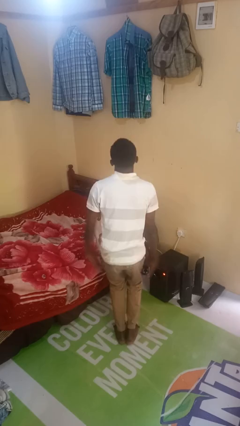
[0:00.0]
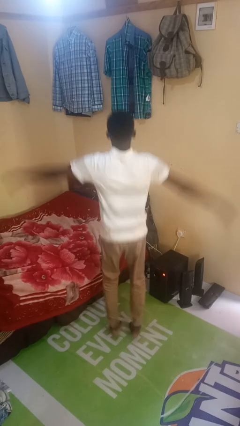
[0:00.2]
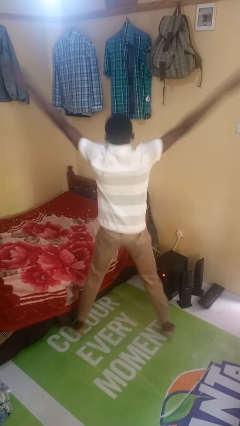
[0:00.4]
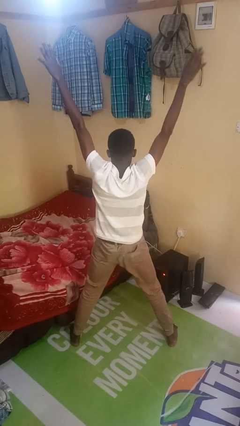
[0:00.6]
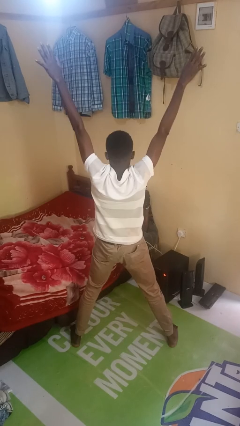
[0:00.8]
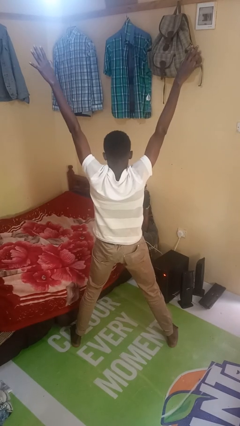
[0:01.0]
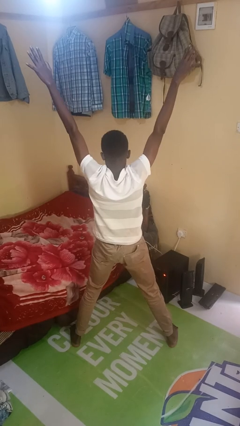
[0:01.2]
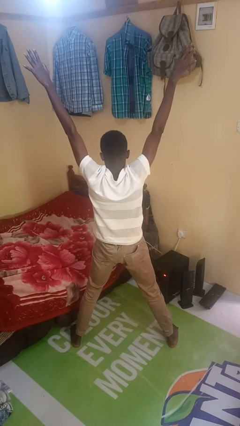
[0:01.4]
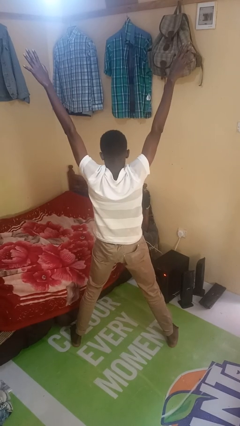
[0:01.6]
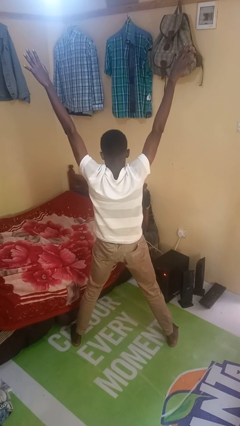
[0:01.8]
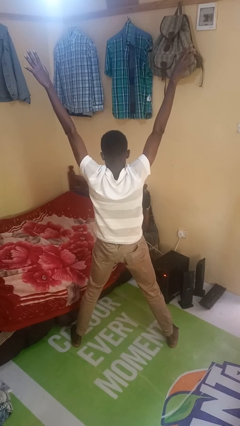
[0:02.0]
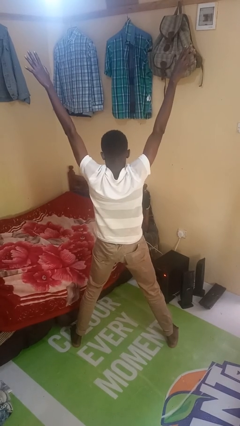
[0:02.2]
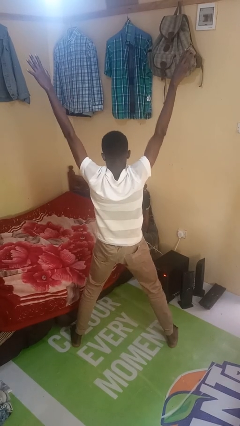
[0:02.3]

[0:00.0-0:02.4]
person exercises with jumping jacks

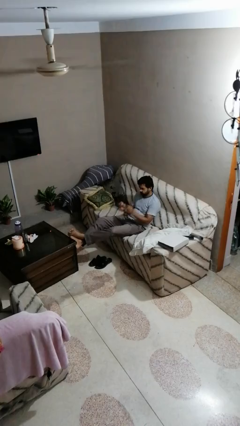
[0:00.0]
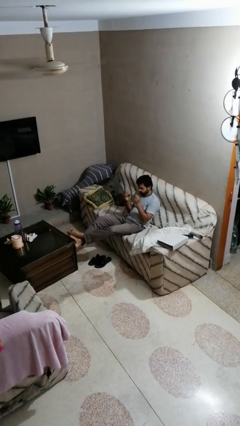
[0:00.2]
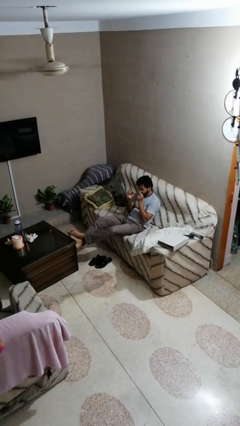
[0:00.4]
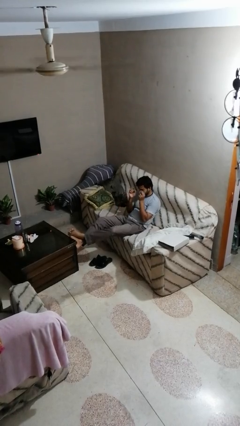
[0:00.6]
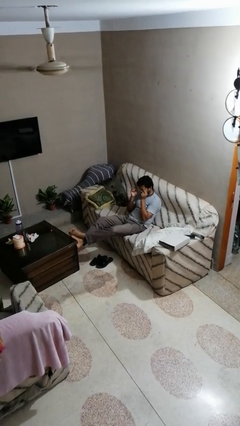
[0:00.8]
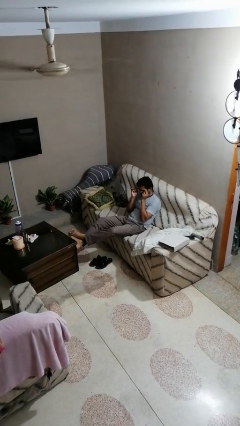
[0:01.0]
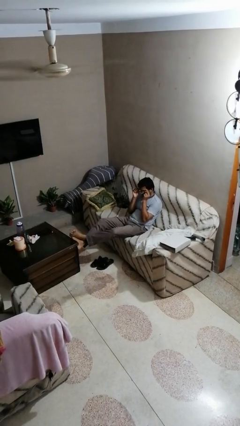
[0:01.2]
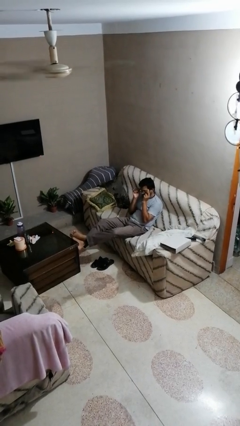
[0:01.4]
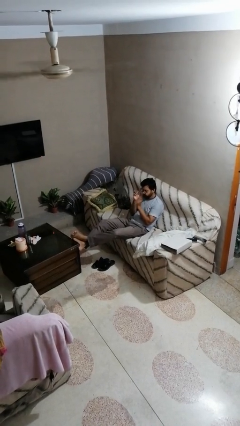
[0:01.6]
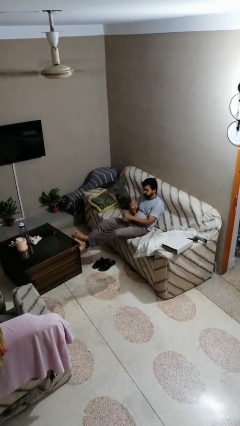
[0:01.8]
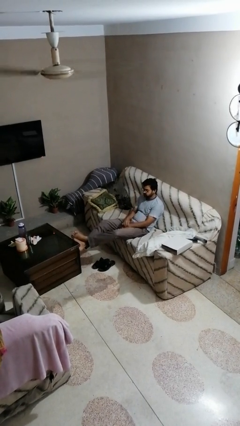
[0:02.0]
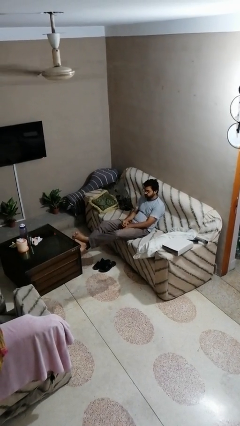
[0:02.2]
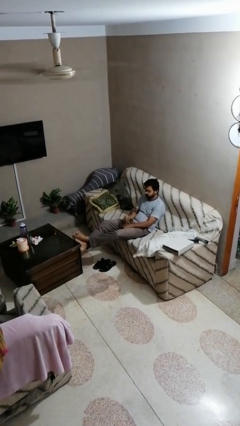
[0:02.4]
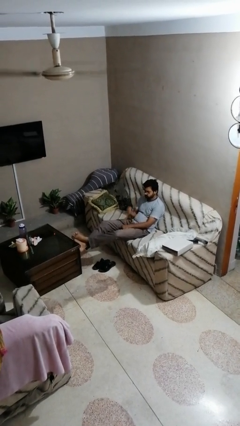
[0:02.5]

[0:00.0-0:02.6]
person puts on glasses

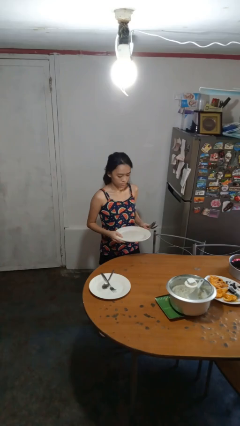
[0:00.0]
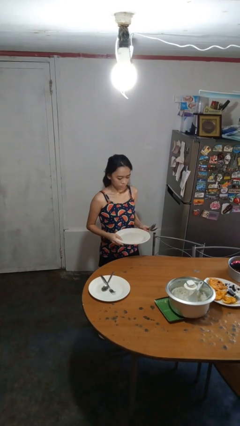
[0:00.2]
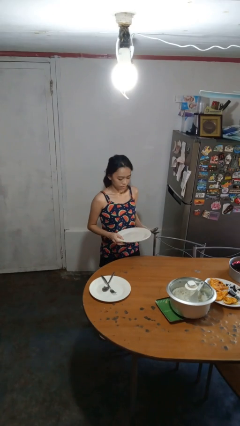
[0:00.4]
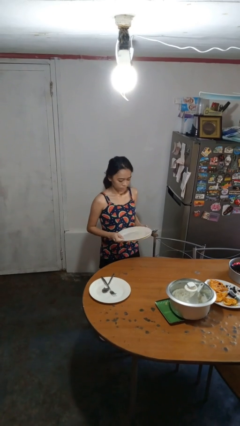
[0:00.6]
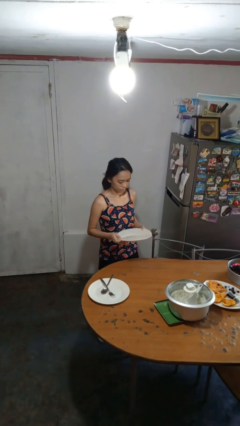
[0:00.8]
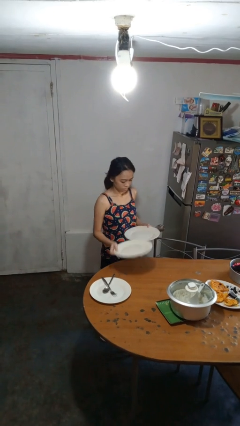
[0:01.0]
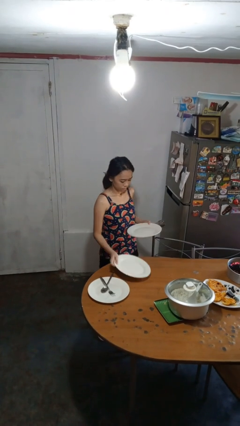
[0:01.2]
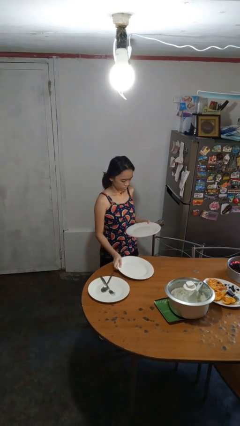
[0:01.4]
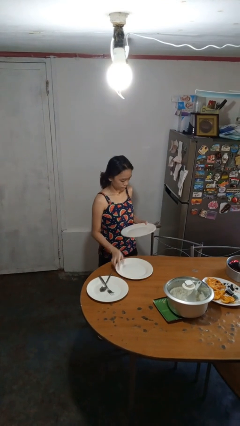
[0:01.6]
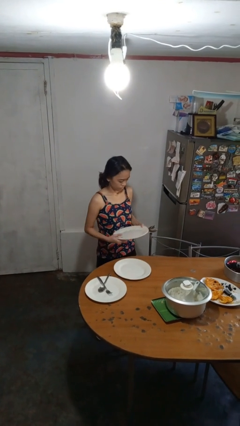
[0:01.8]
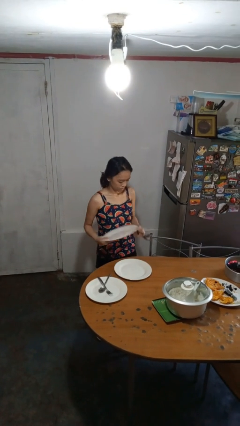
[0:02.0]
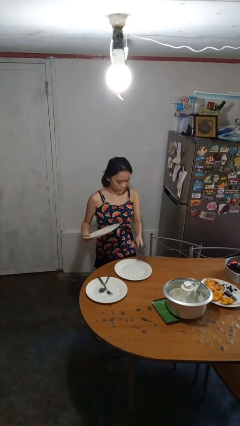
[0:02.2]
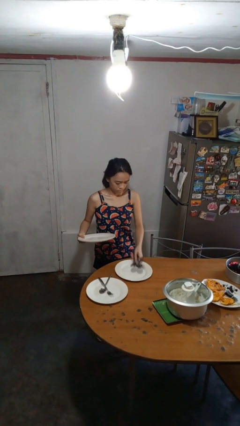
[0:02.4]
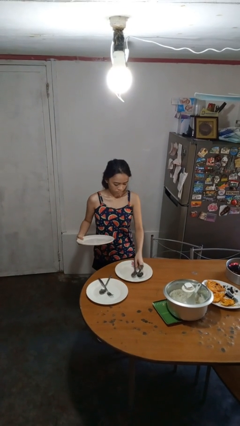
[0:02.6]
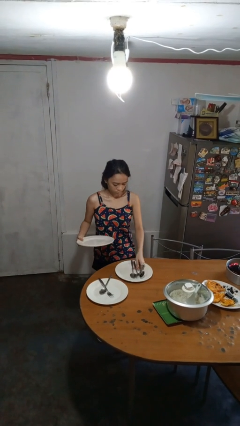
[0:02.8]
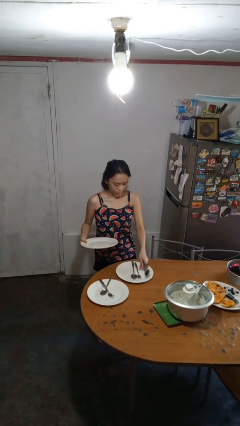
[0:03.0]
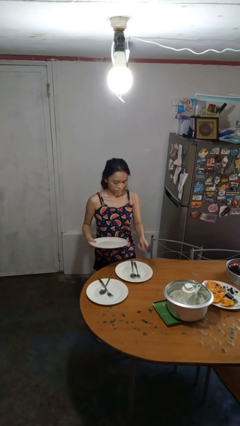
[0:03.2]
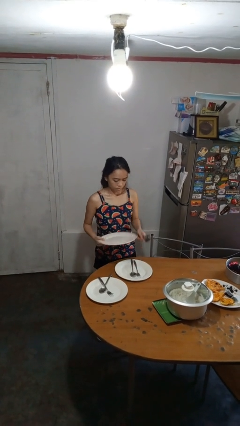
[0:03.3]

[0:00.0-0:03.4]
person sets table

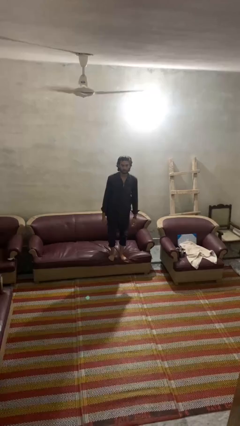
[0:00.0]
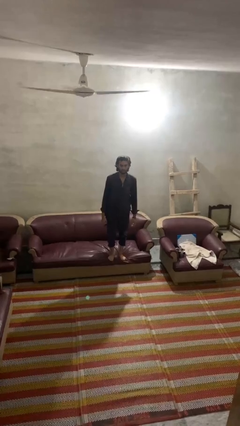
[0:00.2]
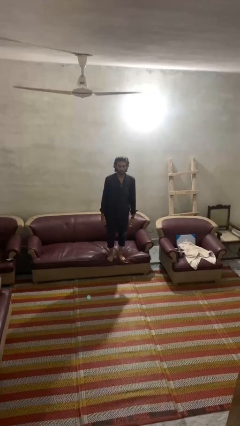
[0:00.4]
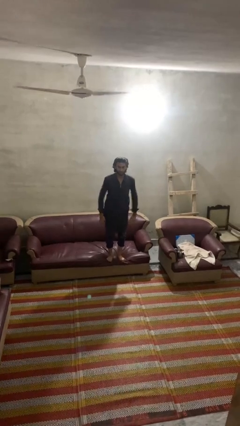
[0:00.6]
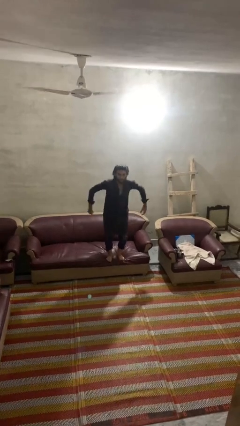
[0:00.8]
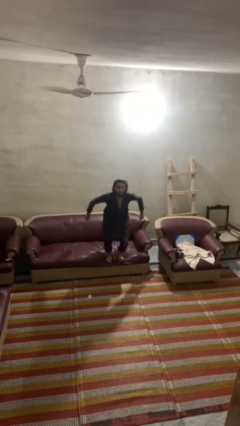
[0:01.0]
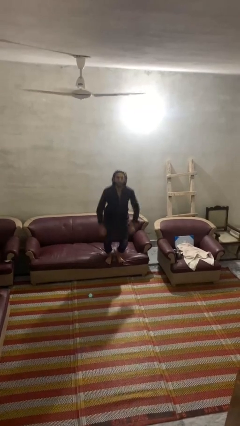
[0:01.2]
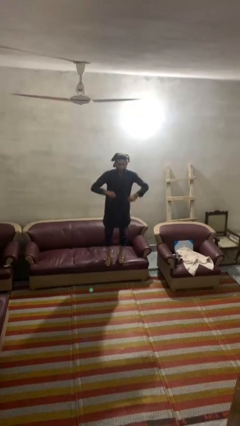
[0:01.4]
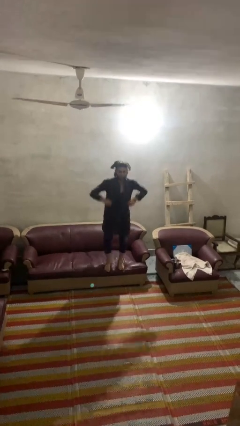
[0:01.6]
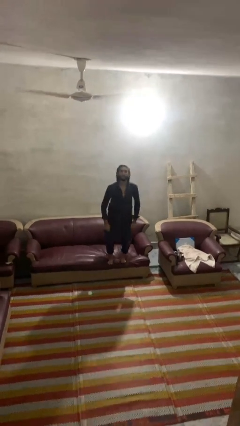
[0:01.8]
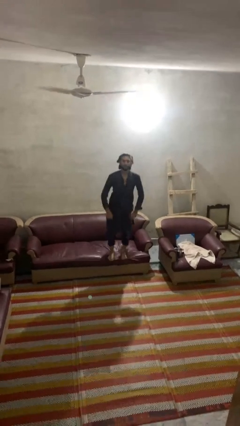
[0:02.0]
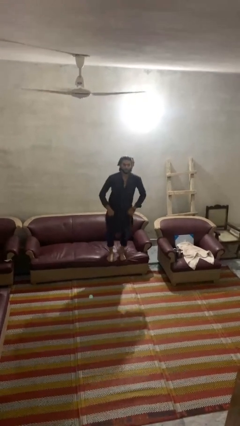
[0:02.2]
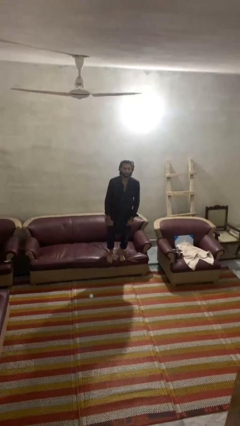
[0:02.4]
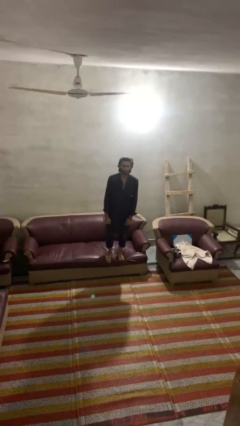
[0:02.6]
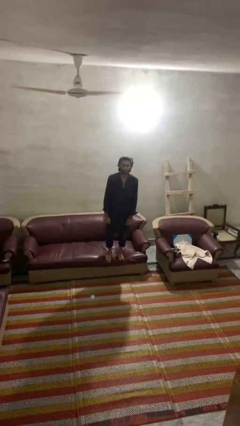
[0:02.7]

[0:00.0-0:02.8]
person jumps on couch

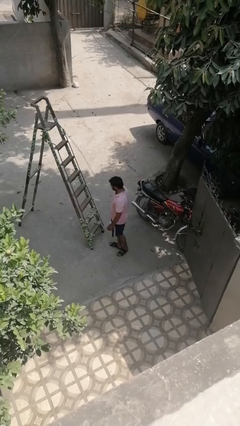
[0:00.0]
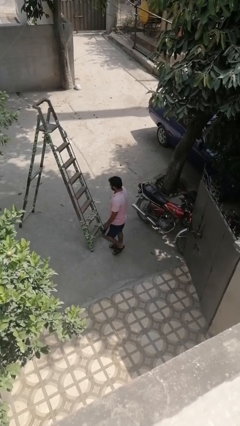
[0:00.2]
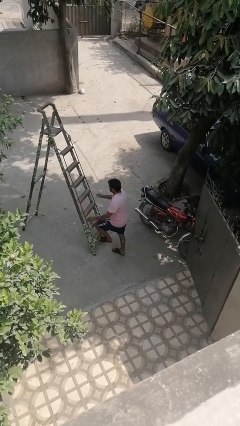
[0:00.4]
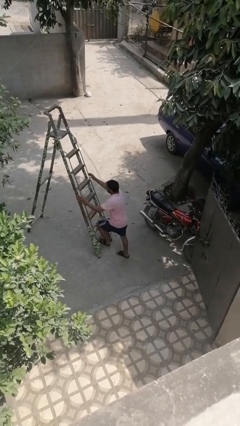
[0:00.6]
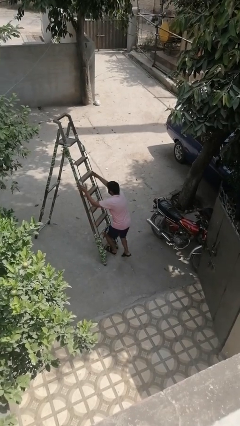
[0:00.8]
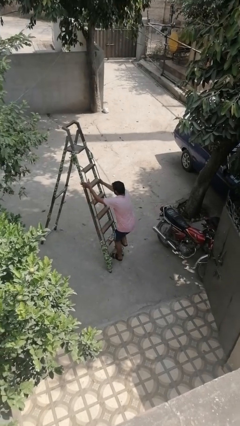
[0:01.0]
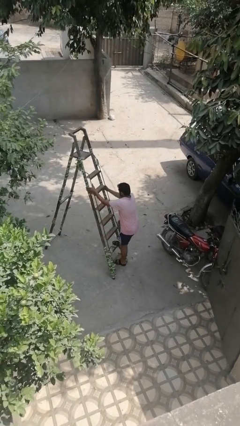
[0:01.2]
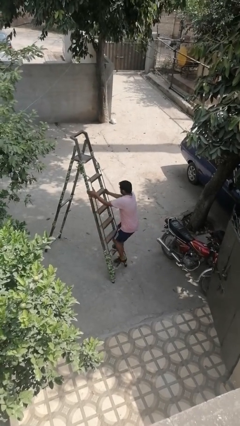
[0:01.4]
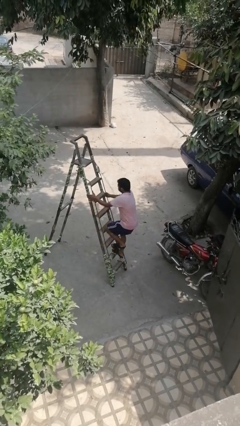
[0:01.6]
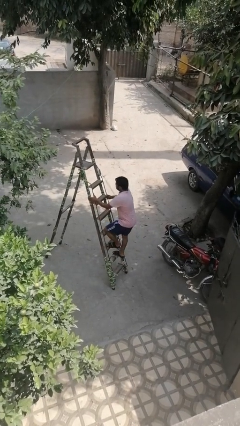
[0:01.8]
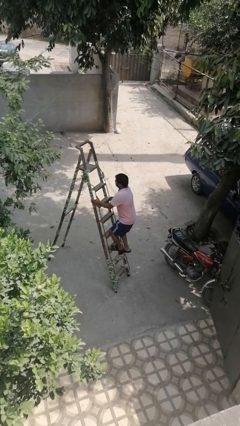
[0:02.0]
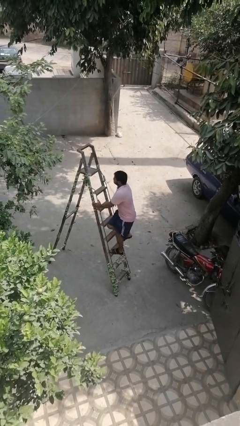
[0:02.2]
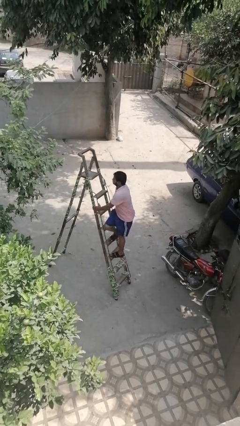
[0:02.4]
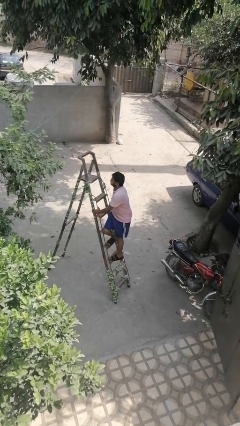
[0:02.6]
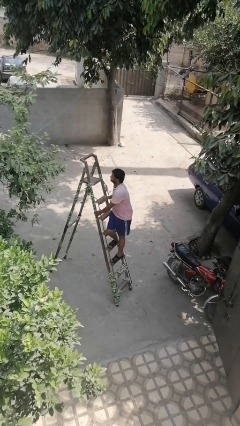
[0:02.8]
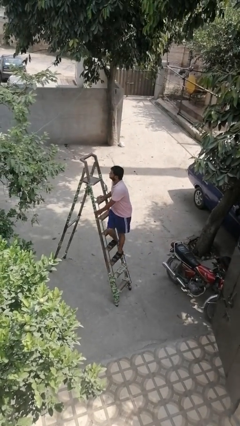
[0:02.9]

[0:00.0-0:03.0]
person climbs up ladder

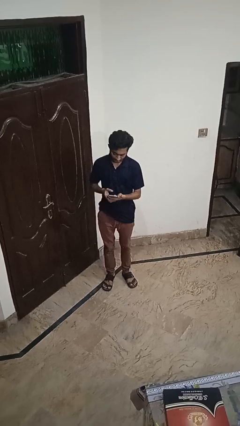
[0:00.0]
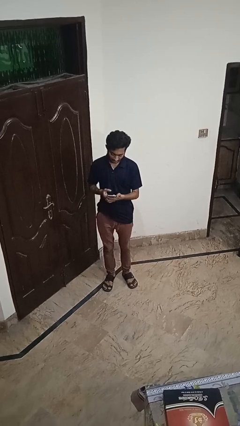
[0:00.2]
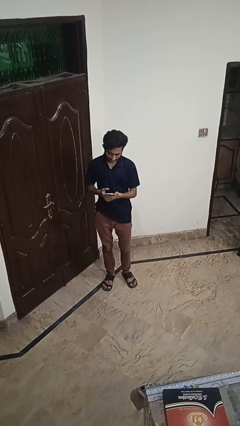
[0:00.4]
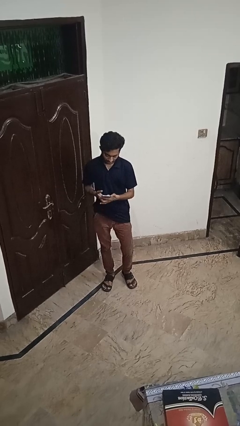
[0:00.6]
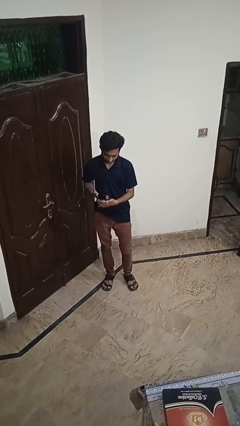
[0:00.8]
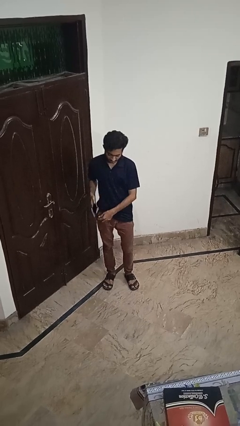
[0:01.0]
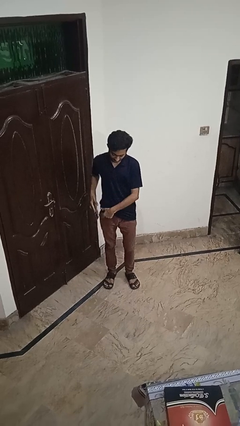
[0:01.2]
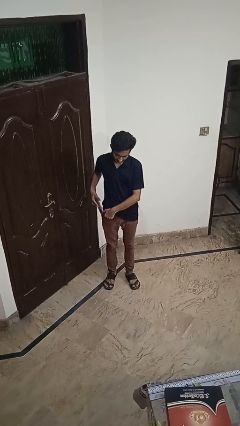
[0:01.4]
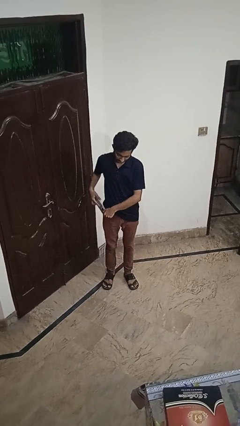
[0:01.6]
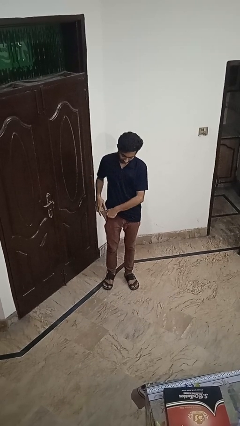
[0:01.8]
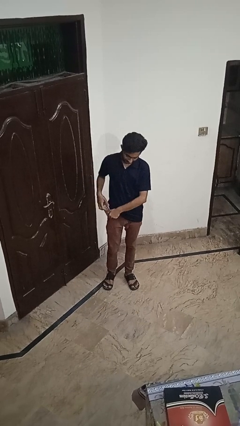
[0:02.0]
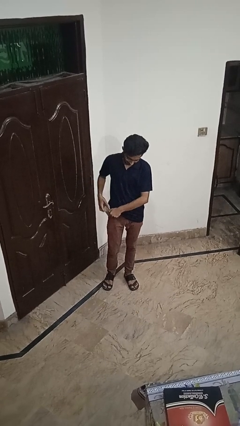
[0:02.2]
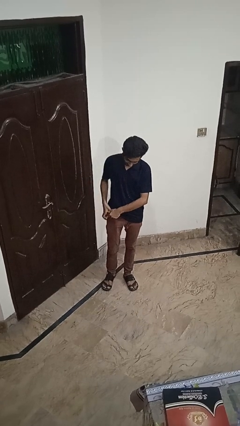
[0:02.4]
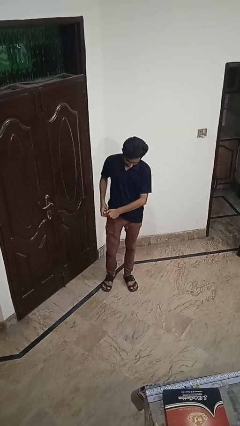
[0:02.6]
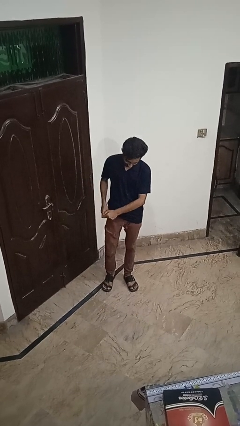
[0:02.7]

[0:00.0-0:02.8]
person puts phone into pocket

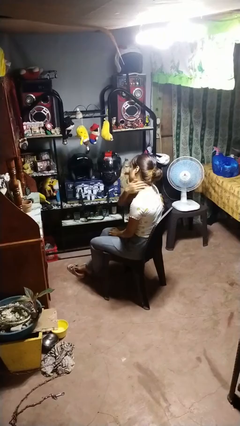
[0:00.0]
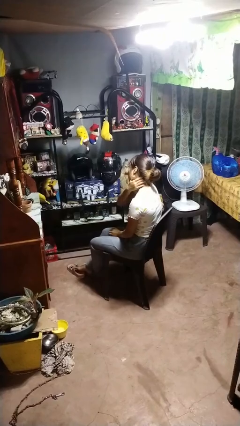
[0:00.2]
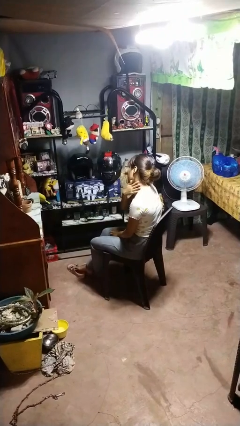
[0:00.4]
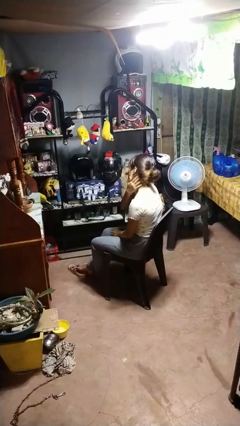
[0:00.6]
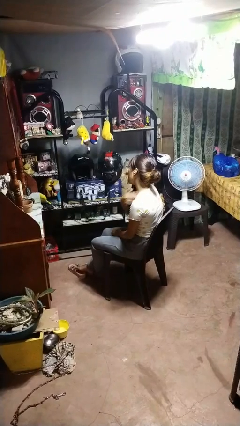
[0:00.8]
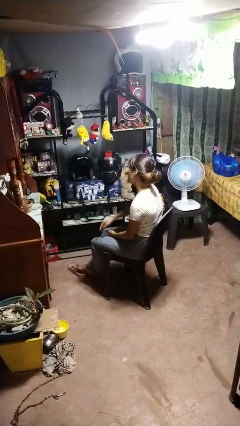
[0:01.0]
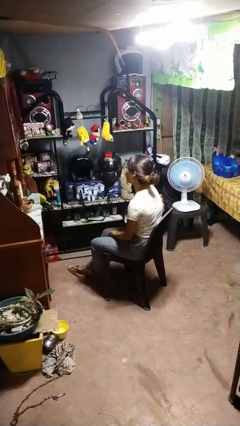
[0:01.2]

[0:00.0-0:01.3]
person rubs neck
